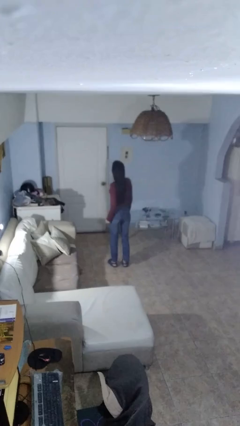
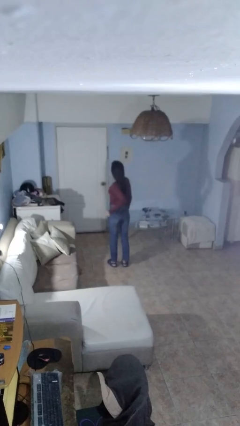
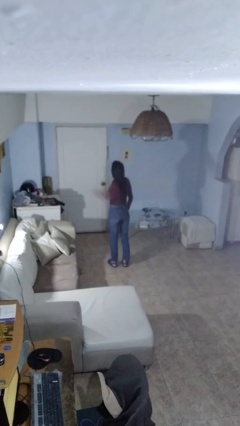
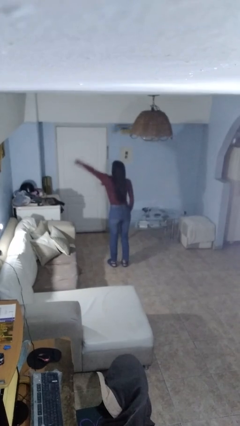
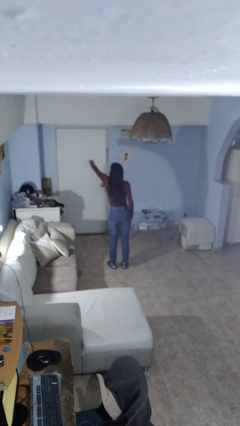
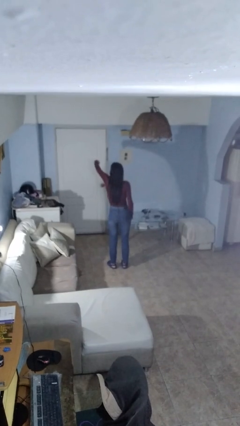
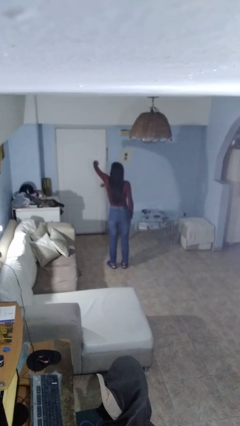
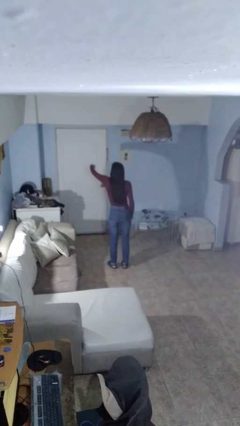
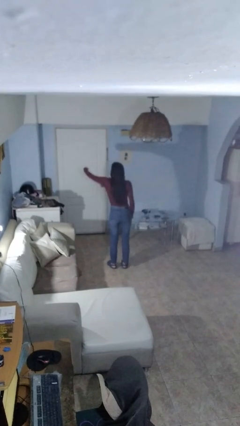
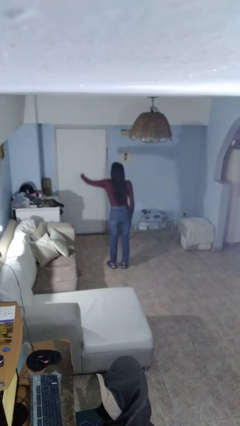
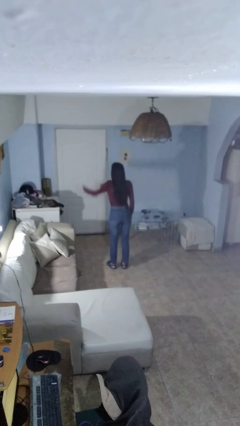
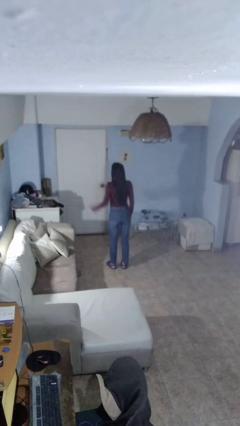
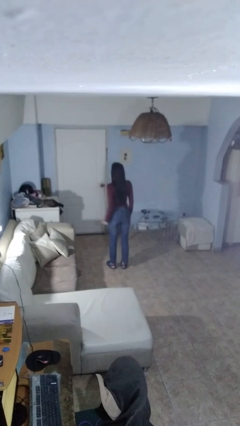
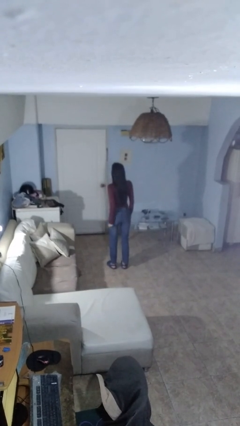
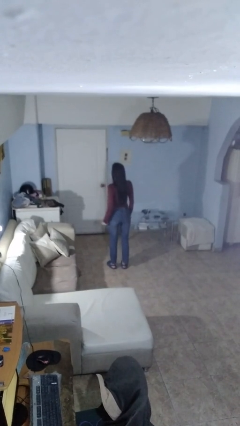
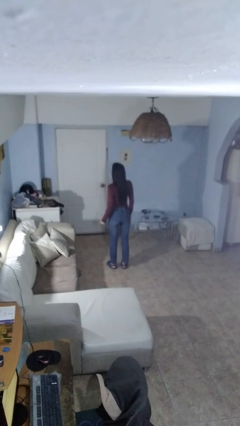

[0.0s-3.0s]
person punches

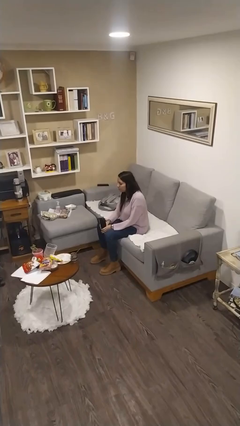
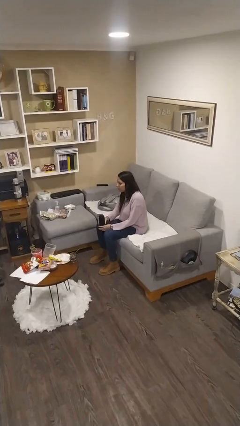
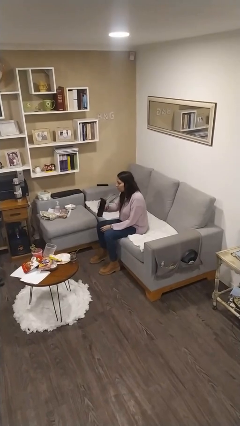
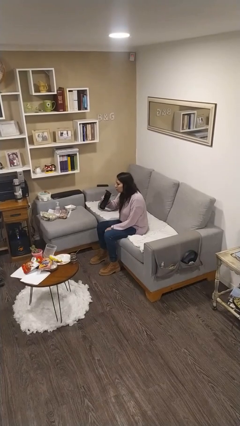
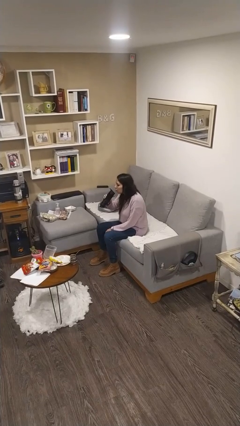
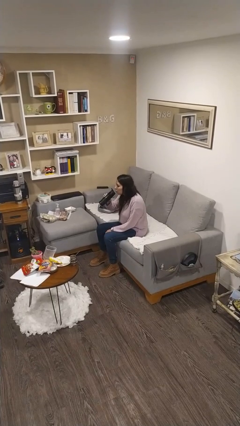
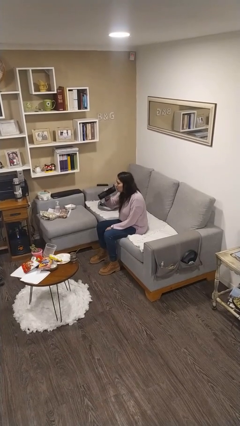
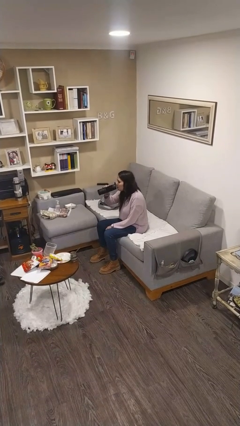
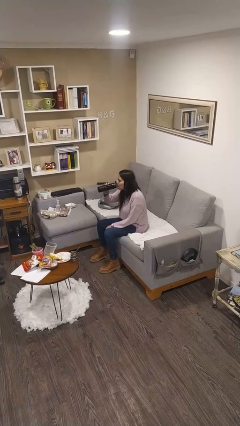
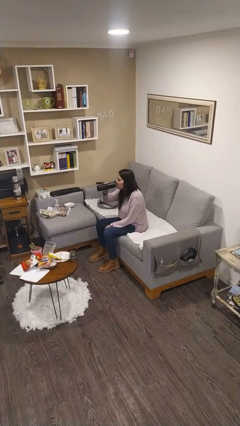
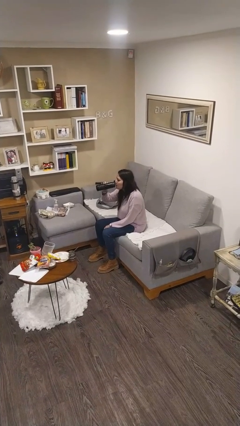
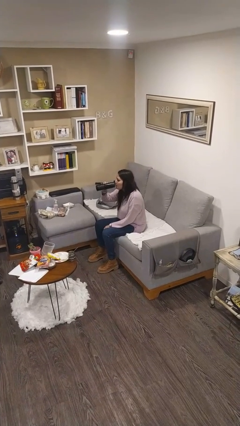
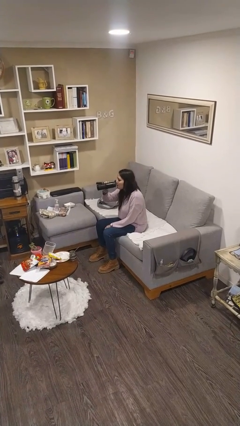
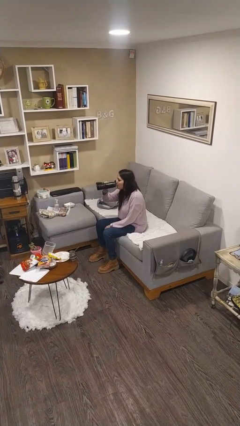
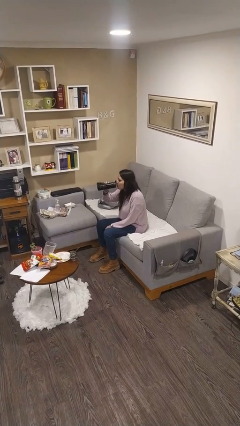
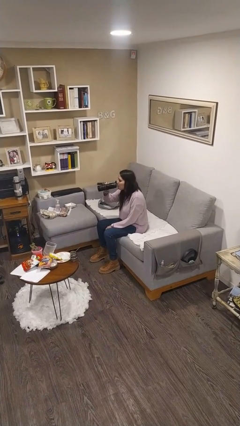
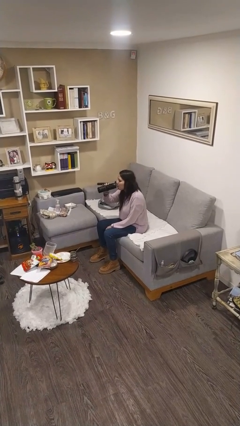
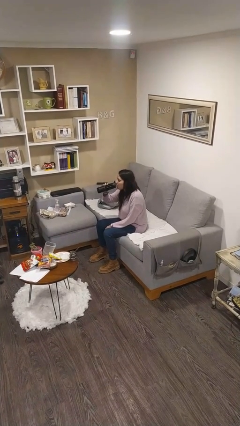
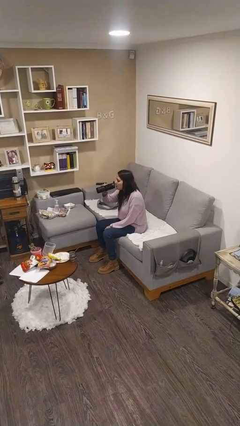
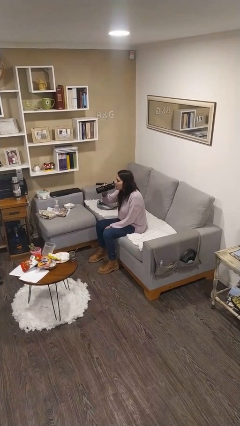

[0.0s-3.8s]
person drinks from bottle

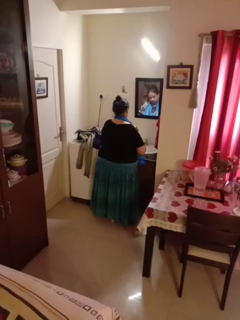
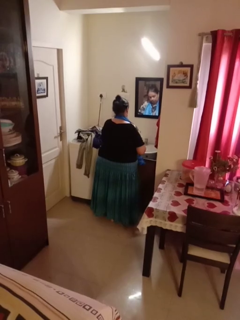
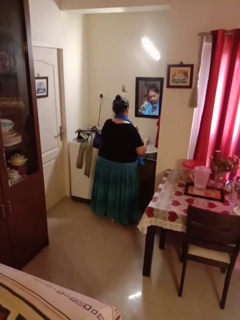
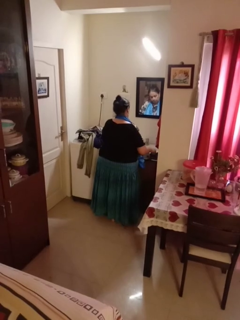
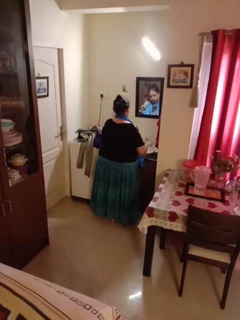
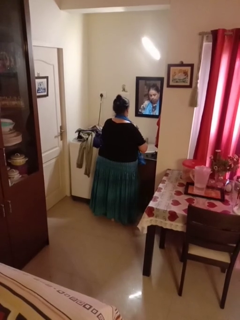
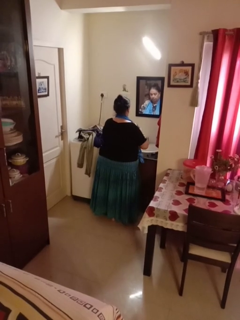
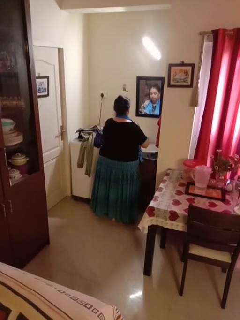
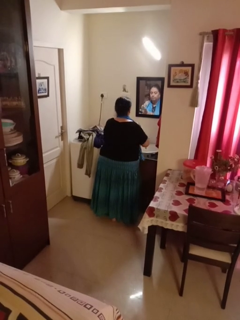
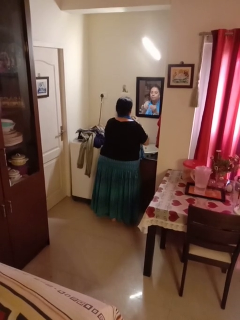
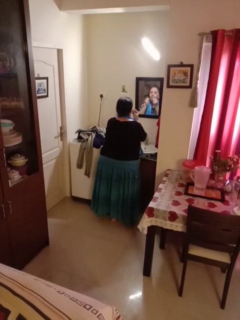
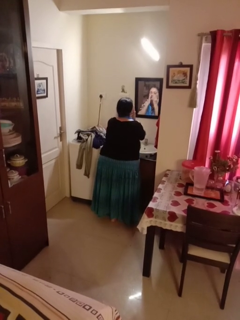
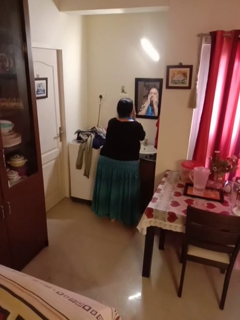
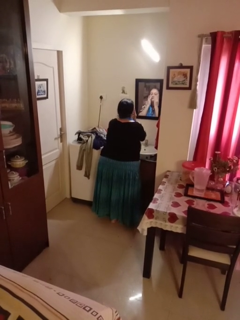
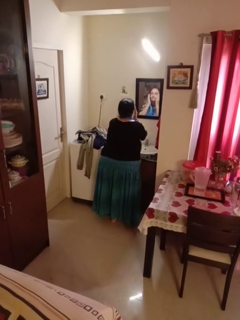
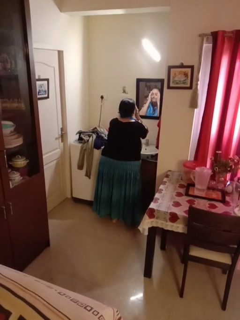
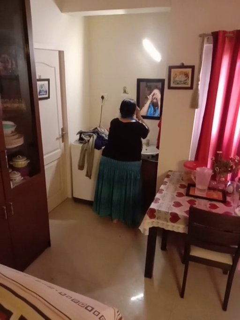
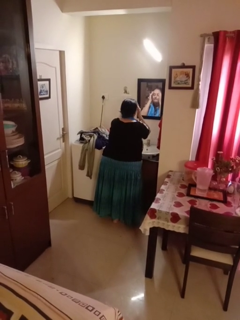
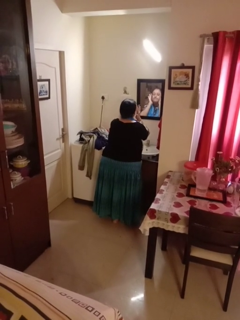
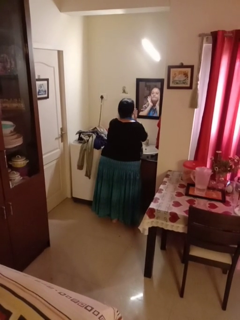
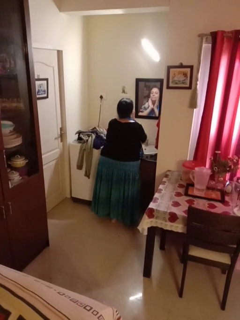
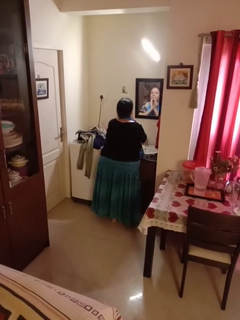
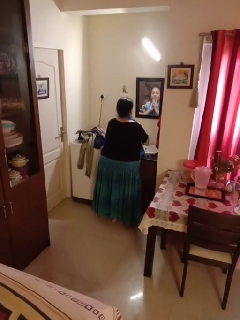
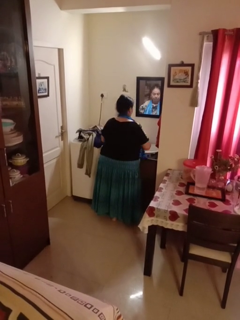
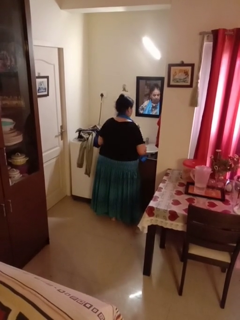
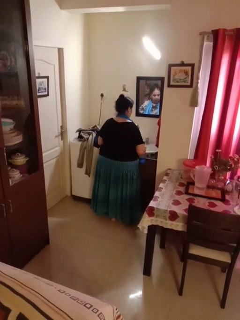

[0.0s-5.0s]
person applies foundation makeup

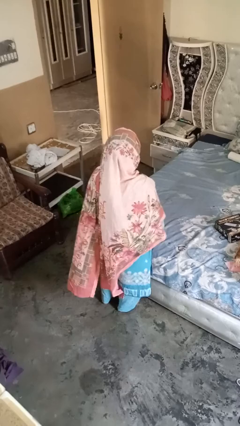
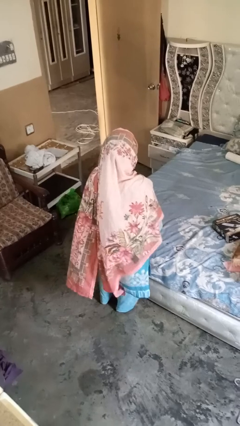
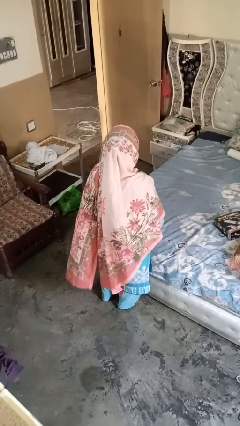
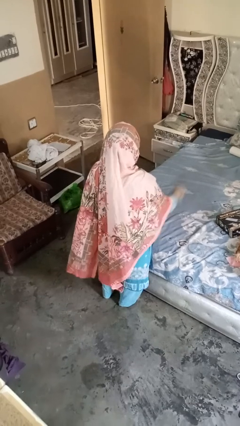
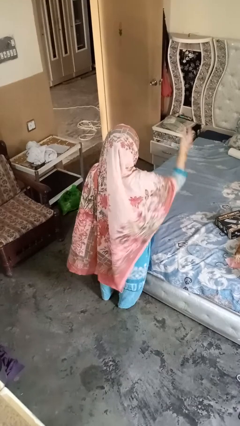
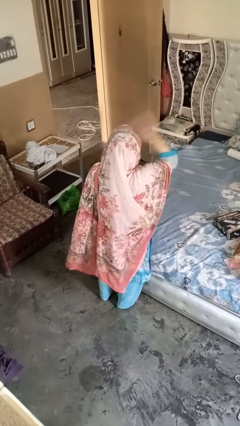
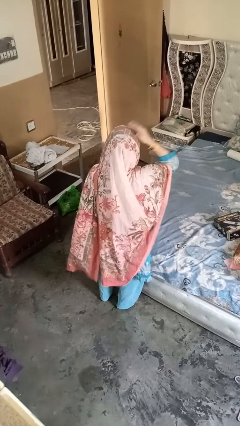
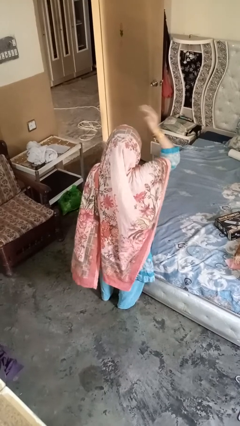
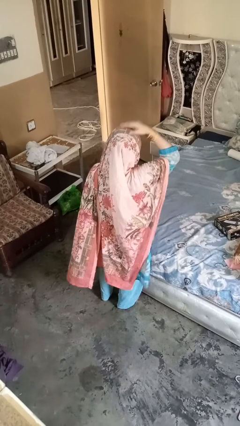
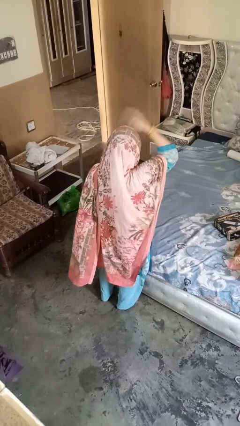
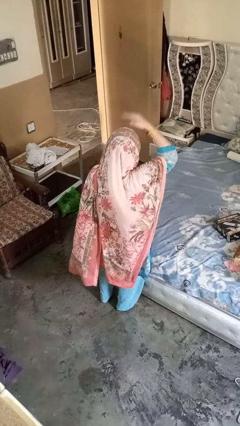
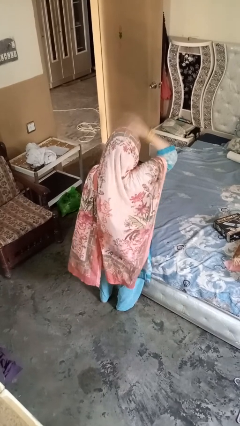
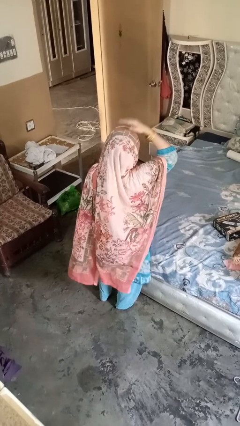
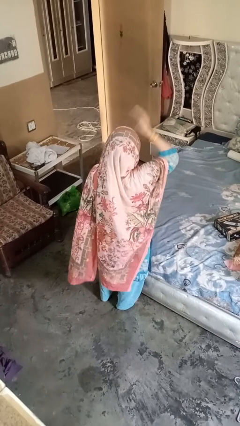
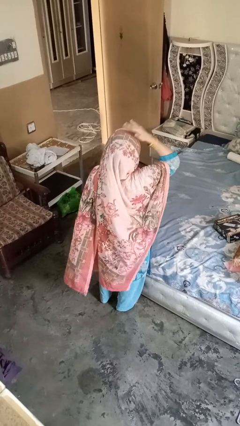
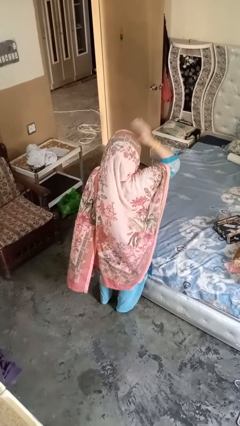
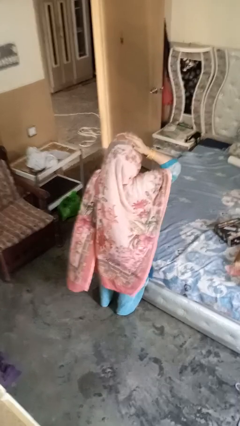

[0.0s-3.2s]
person pats head

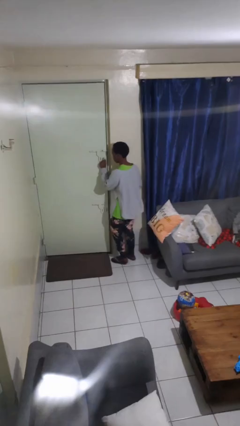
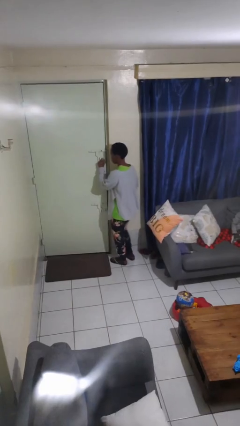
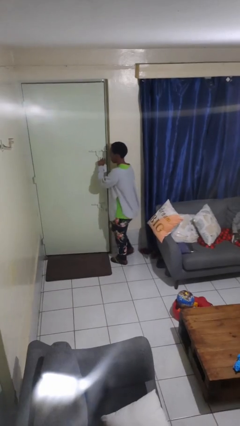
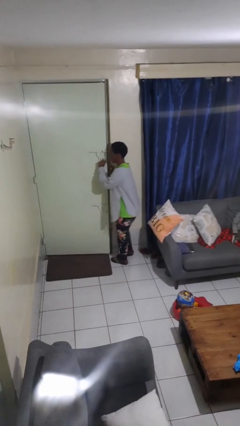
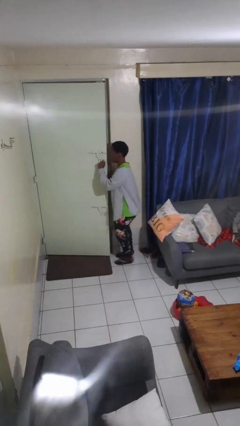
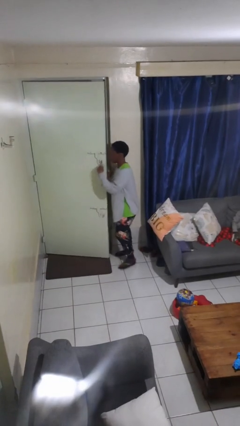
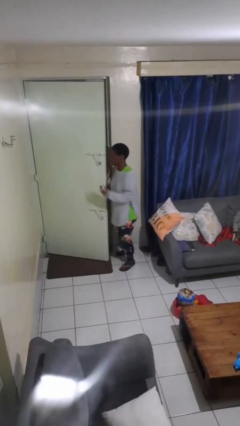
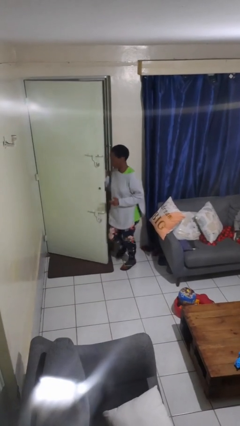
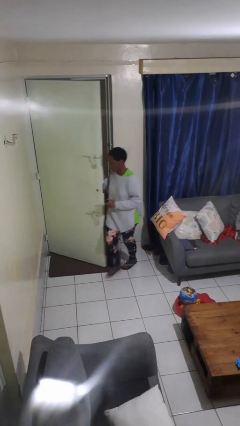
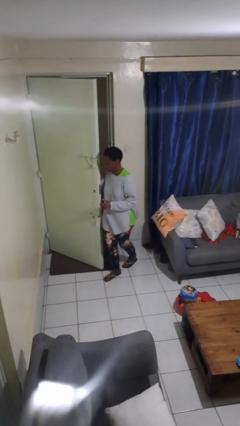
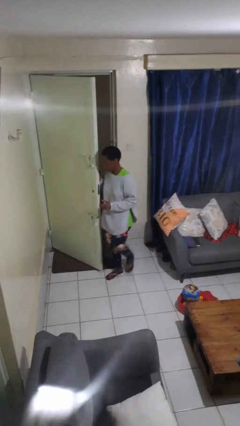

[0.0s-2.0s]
person opens facility door

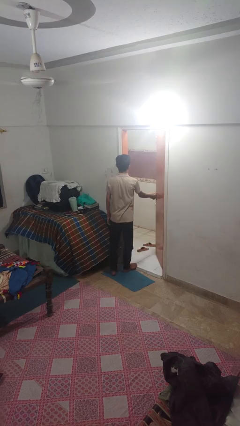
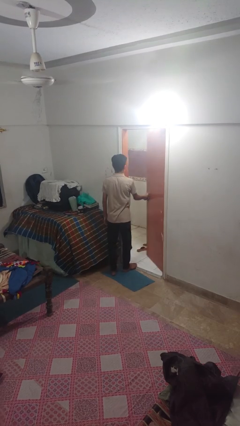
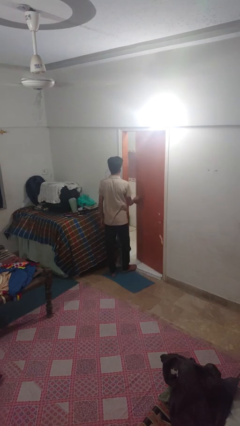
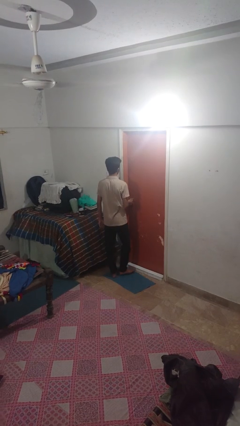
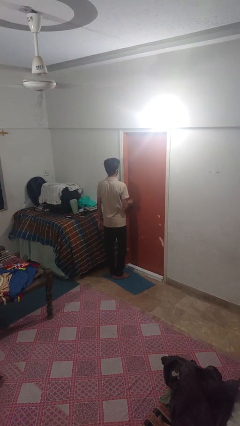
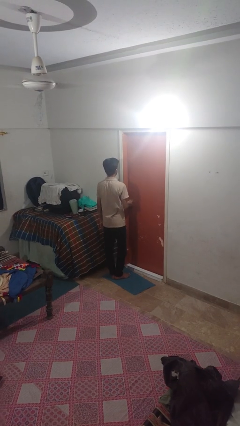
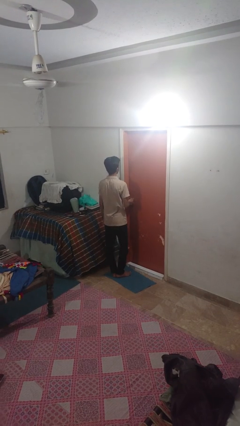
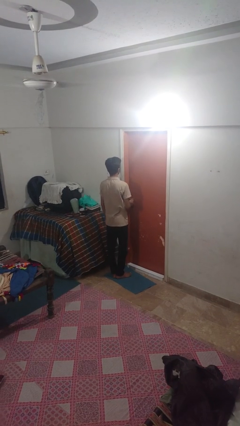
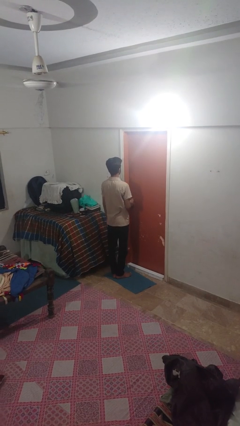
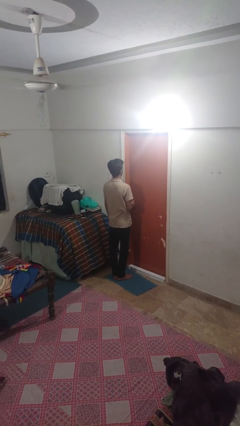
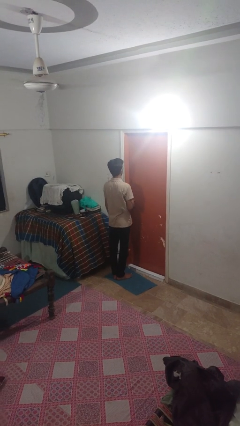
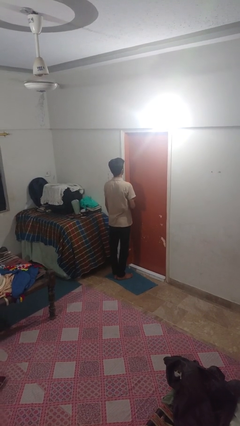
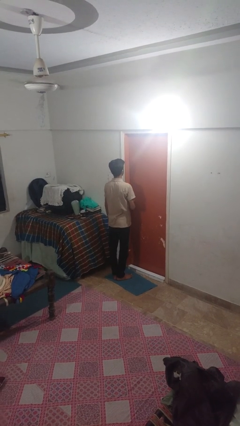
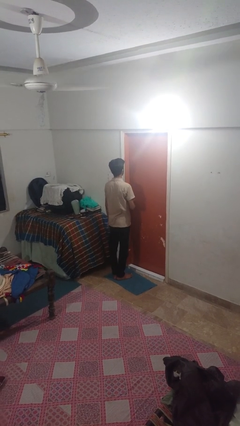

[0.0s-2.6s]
person closes facility door
